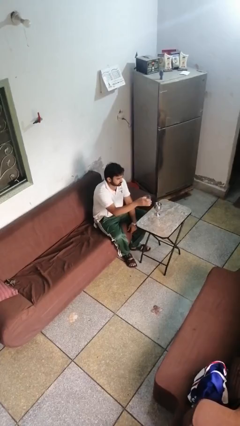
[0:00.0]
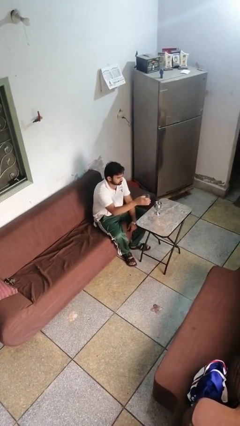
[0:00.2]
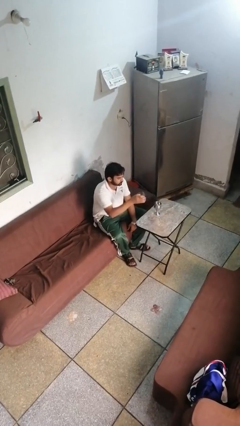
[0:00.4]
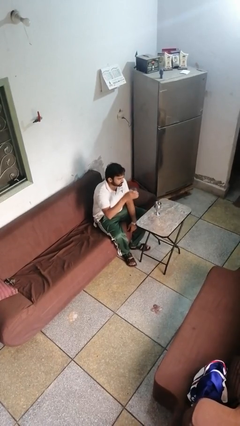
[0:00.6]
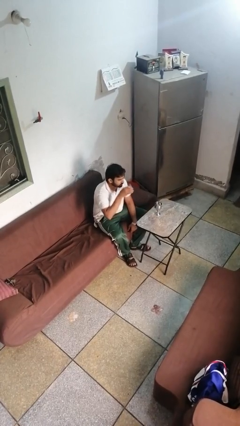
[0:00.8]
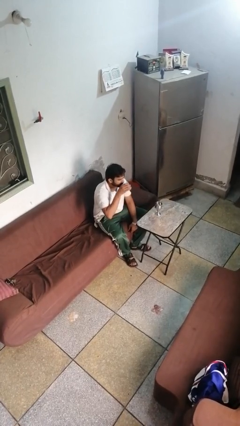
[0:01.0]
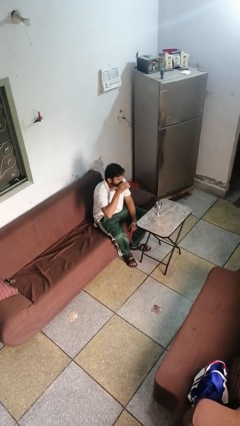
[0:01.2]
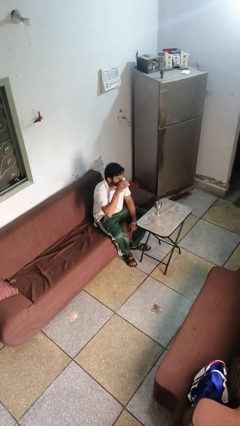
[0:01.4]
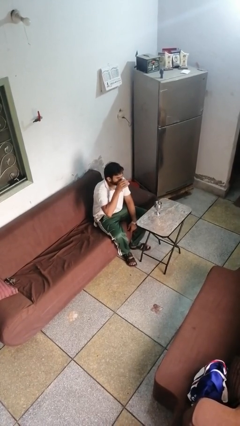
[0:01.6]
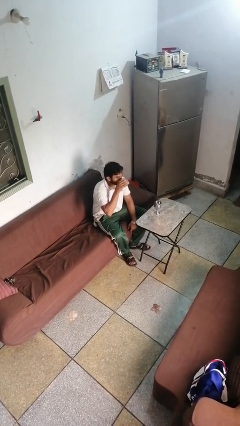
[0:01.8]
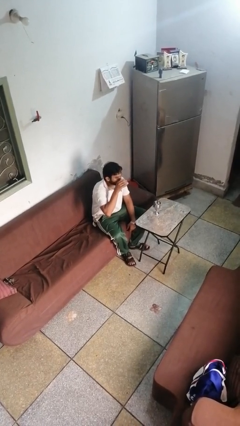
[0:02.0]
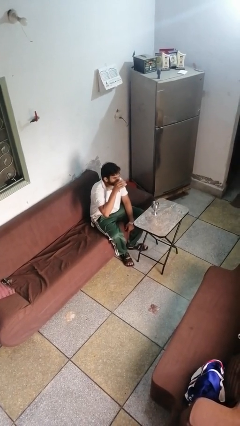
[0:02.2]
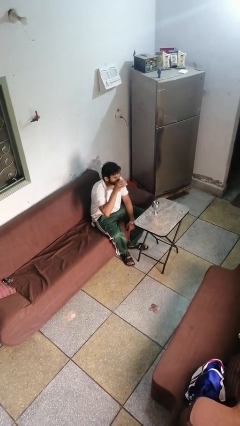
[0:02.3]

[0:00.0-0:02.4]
person drinks from shotglass

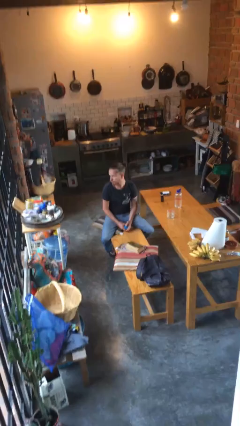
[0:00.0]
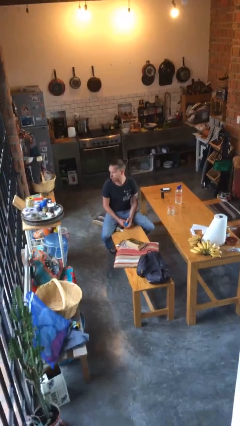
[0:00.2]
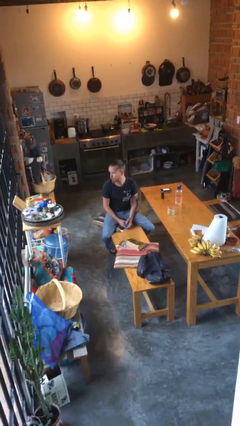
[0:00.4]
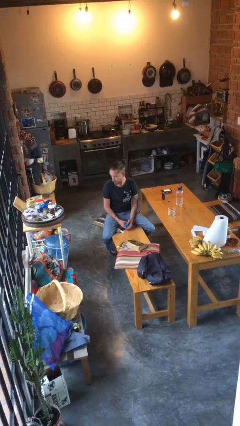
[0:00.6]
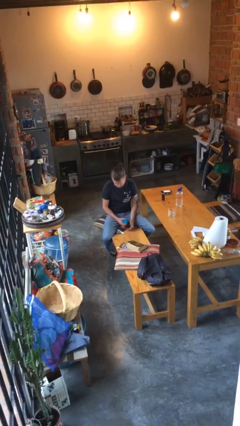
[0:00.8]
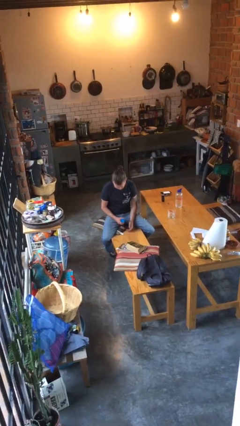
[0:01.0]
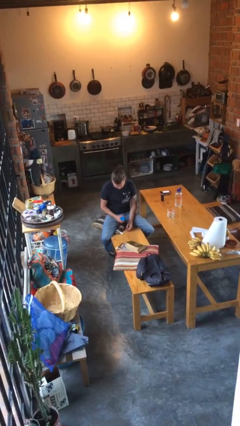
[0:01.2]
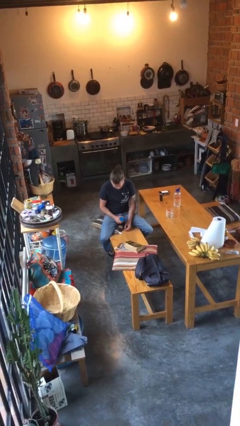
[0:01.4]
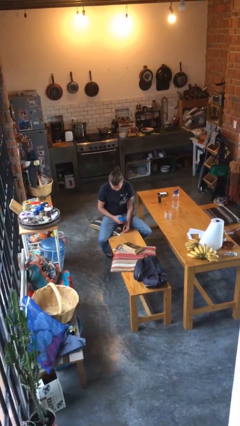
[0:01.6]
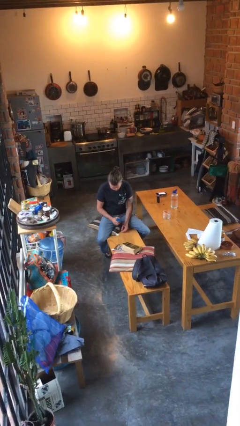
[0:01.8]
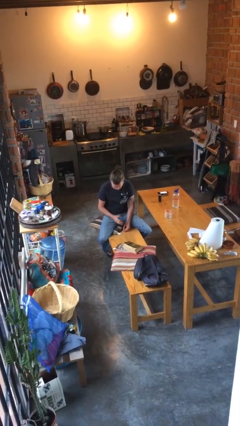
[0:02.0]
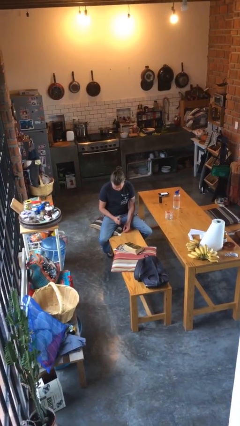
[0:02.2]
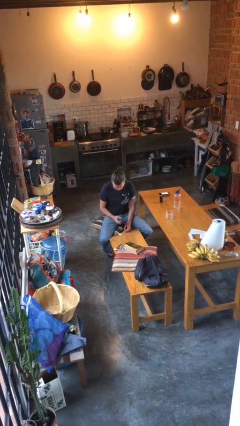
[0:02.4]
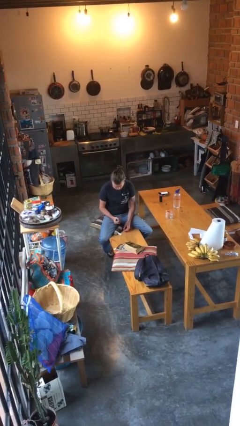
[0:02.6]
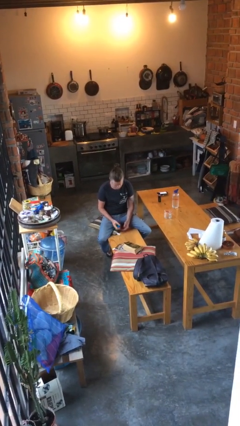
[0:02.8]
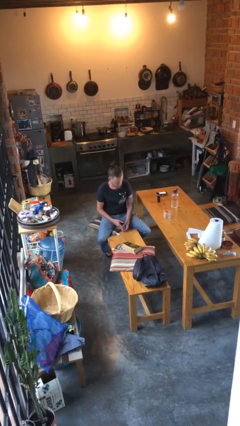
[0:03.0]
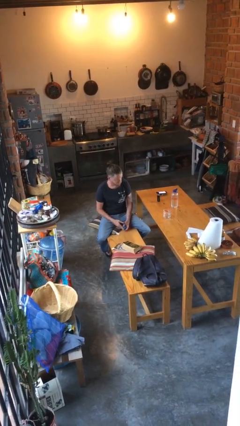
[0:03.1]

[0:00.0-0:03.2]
person squeezes object

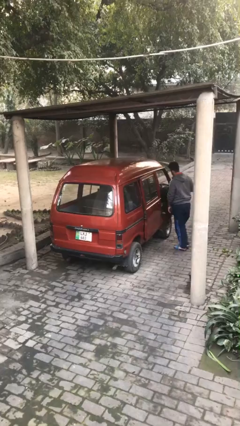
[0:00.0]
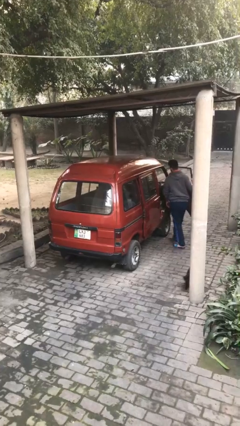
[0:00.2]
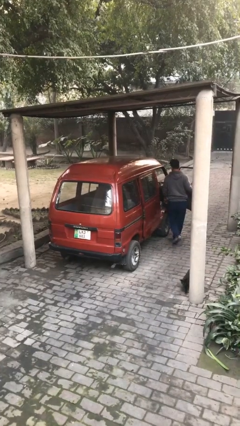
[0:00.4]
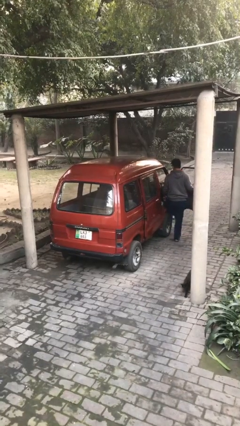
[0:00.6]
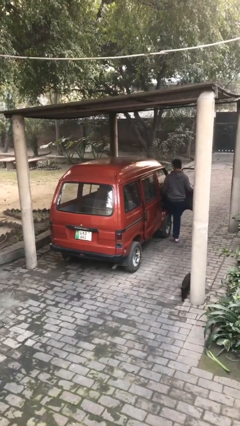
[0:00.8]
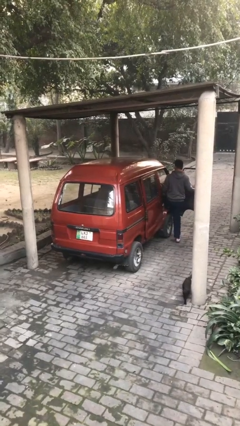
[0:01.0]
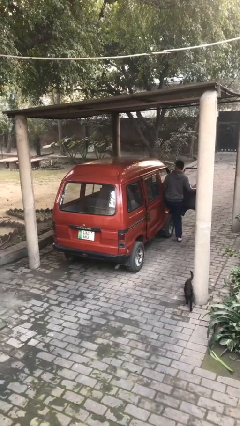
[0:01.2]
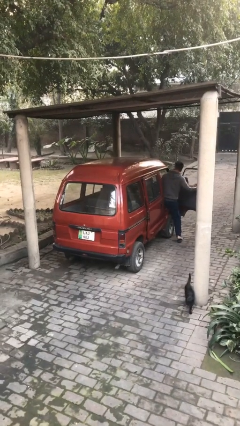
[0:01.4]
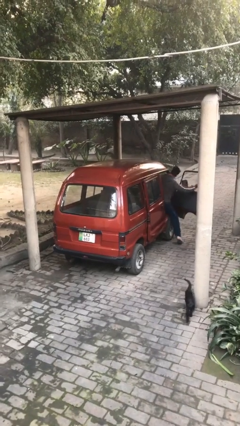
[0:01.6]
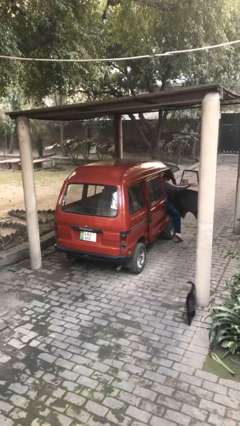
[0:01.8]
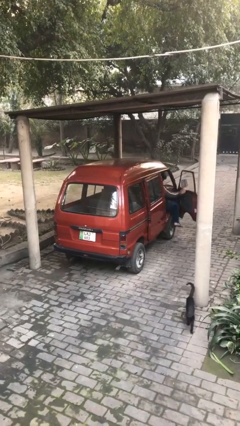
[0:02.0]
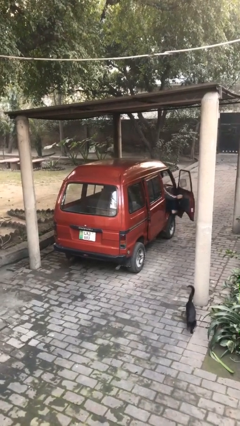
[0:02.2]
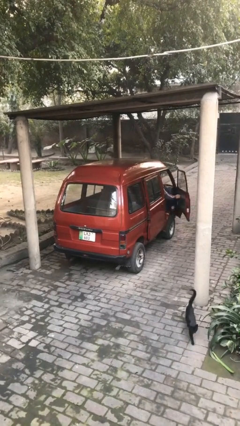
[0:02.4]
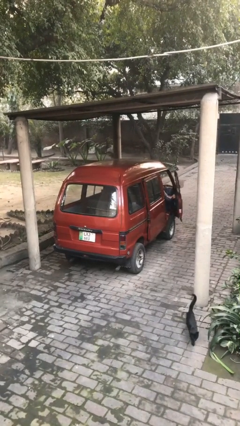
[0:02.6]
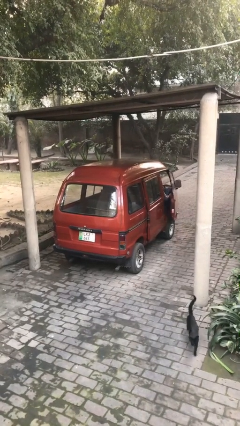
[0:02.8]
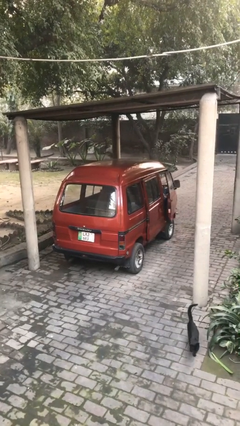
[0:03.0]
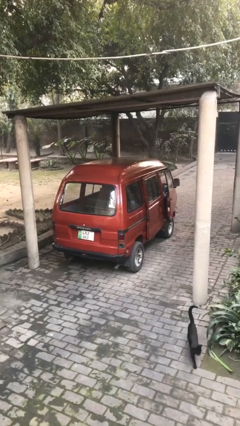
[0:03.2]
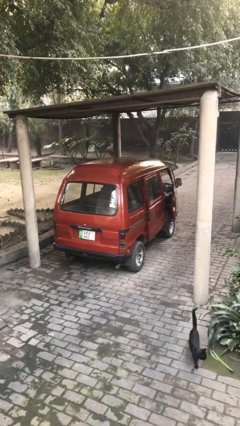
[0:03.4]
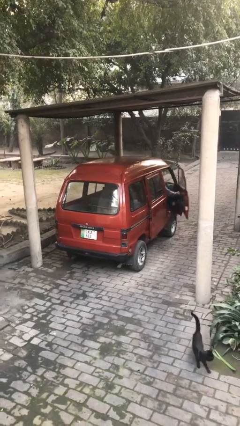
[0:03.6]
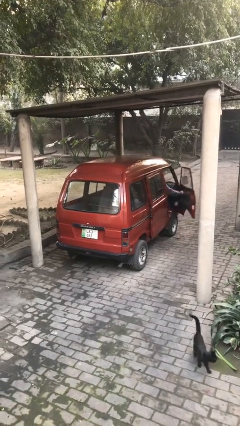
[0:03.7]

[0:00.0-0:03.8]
car picks up person

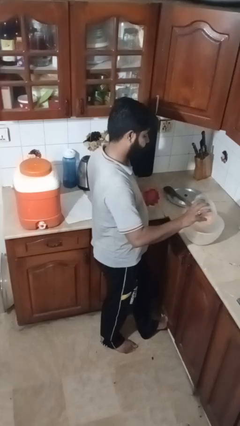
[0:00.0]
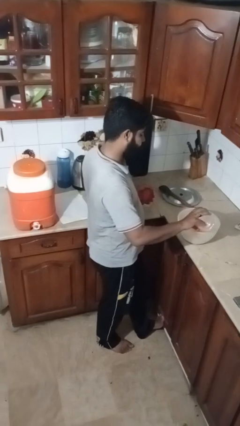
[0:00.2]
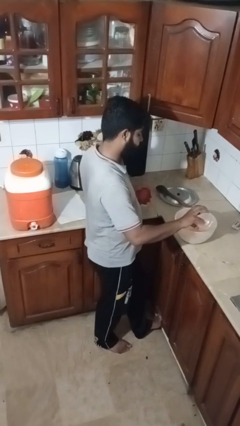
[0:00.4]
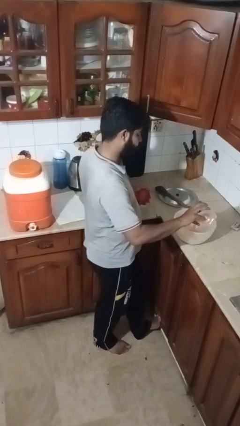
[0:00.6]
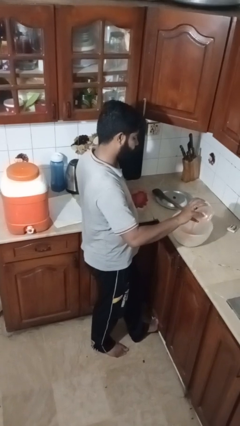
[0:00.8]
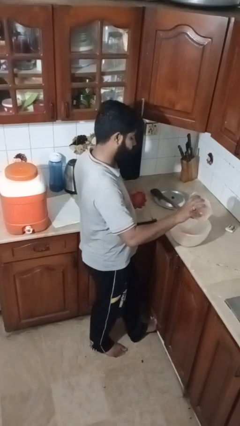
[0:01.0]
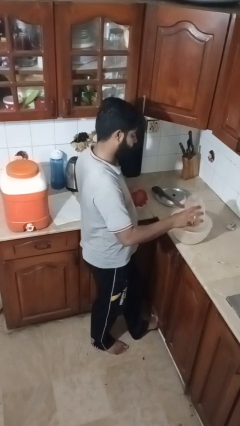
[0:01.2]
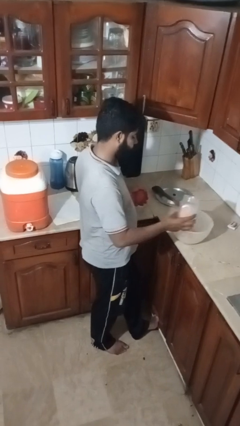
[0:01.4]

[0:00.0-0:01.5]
person pours into bowl

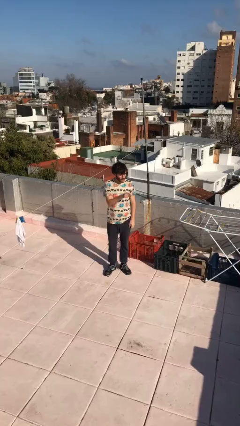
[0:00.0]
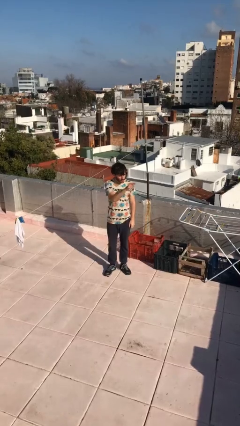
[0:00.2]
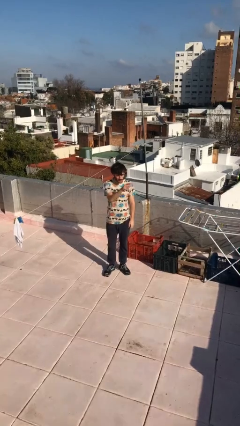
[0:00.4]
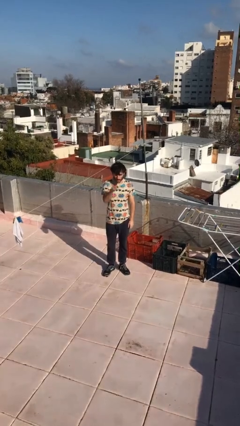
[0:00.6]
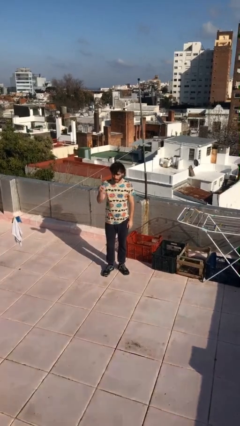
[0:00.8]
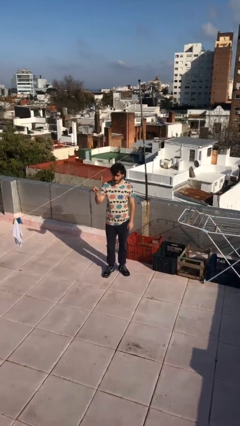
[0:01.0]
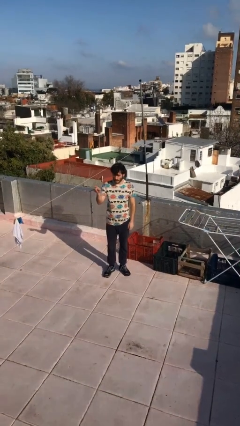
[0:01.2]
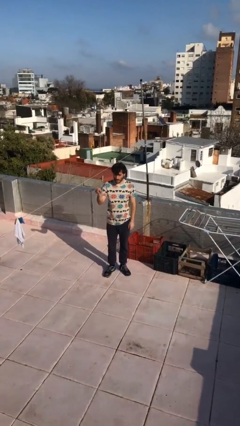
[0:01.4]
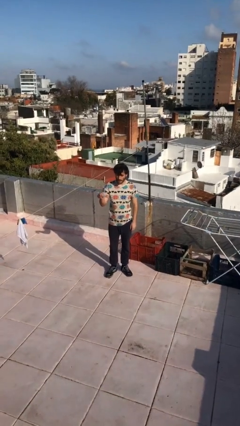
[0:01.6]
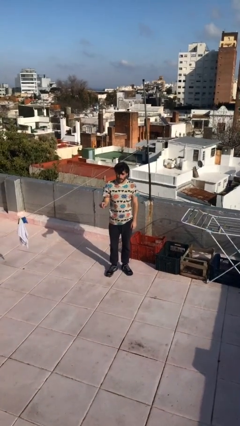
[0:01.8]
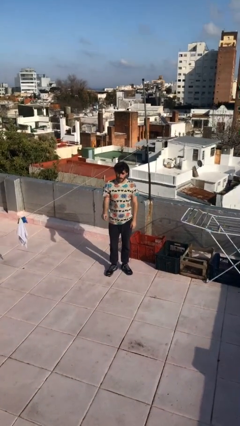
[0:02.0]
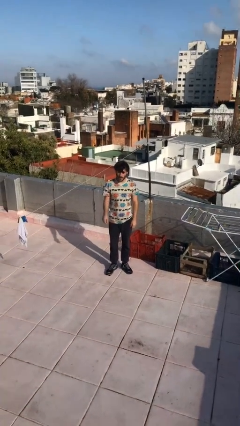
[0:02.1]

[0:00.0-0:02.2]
person gestures swipe right

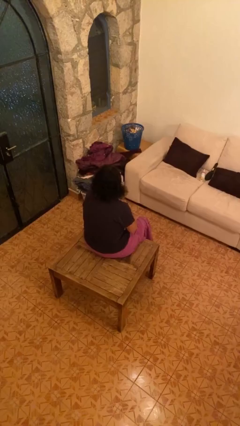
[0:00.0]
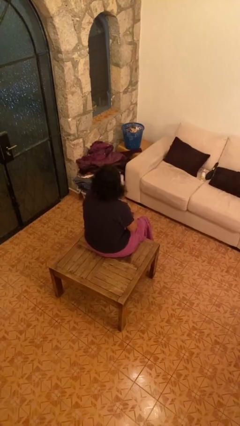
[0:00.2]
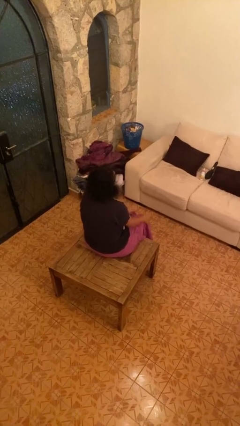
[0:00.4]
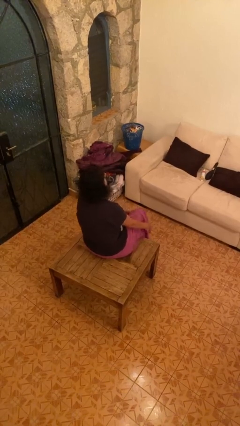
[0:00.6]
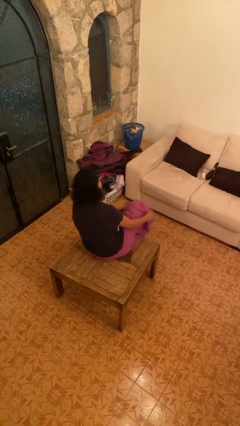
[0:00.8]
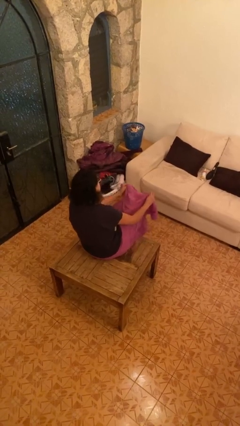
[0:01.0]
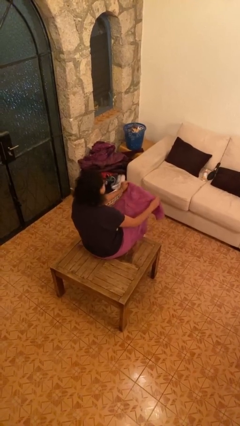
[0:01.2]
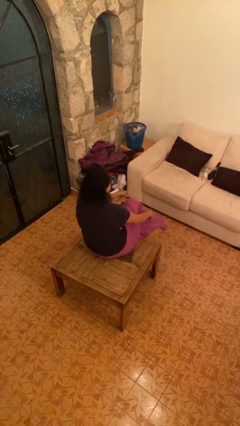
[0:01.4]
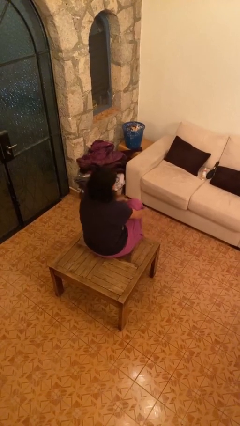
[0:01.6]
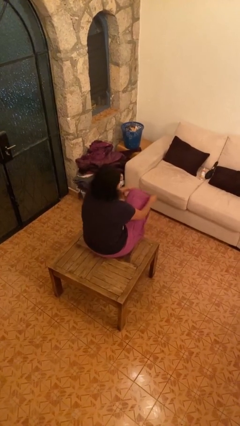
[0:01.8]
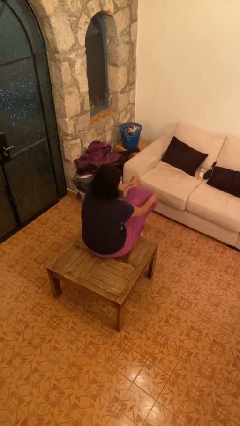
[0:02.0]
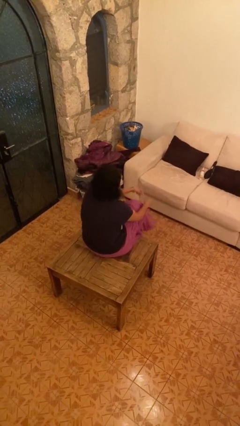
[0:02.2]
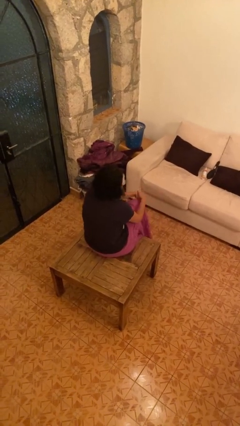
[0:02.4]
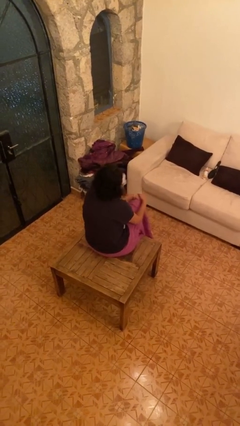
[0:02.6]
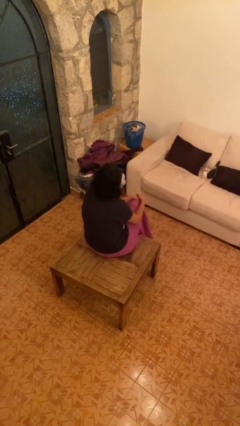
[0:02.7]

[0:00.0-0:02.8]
person crosses legs

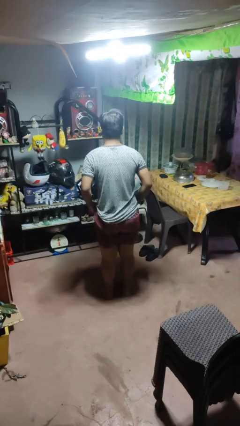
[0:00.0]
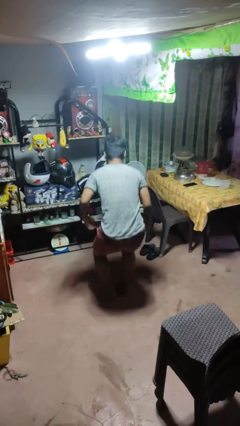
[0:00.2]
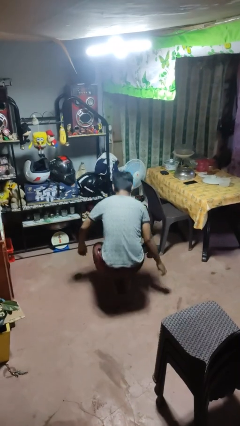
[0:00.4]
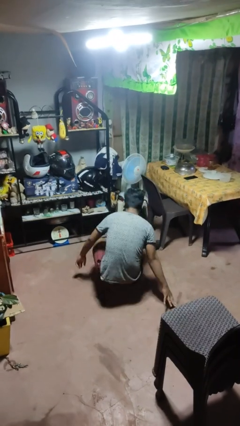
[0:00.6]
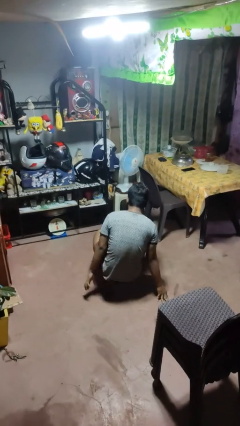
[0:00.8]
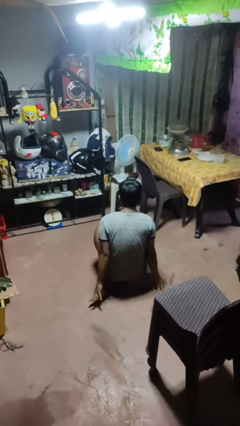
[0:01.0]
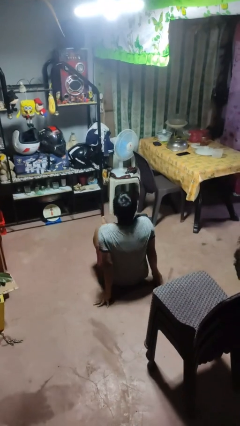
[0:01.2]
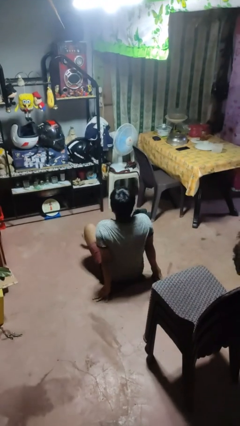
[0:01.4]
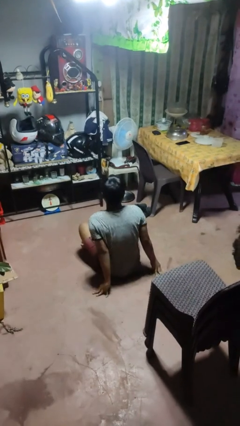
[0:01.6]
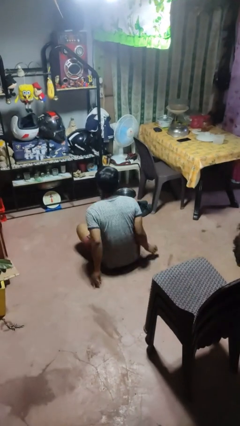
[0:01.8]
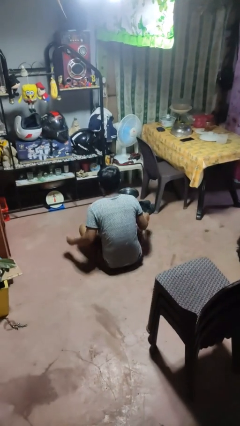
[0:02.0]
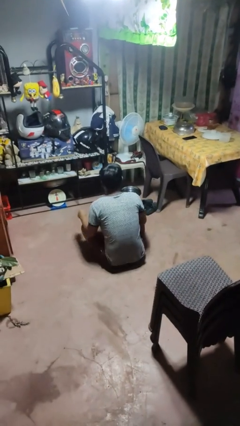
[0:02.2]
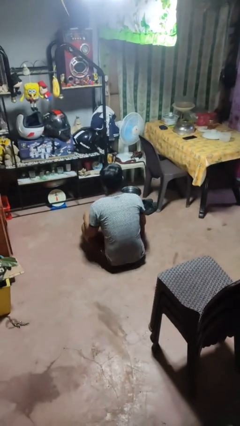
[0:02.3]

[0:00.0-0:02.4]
person sits crisscross
